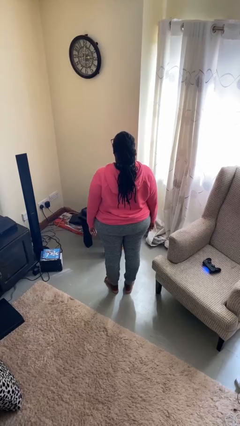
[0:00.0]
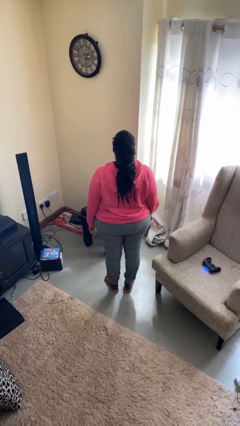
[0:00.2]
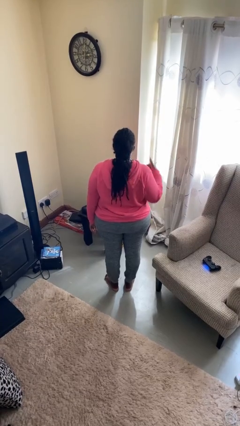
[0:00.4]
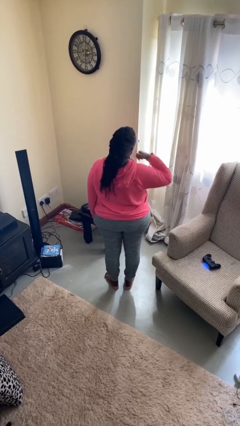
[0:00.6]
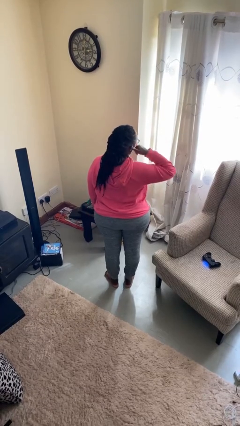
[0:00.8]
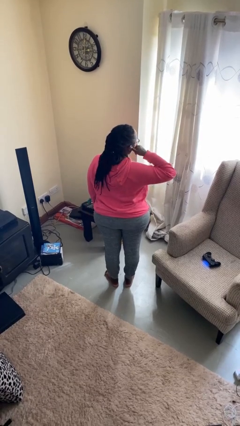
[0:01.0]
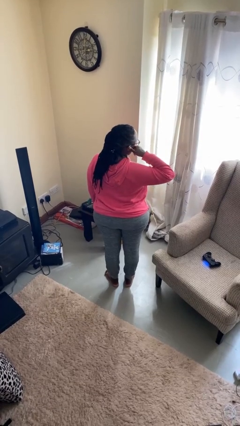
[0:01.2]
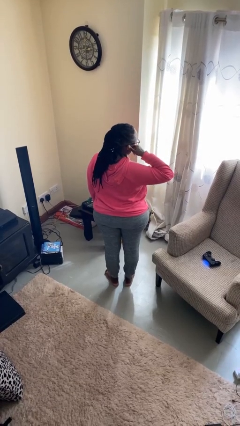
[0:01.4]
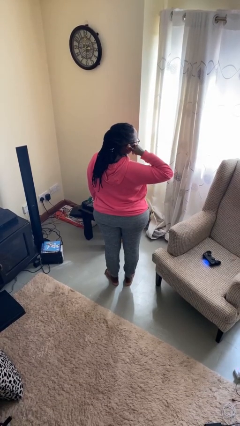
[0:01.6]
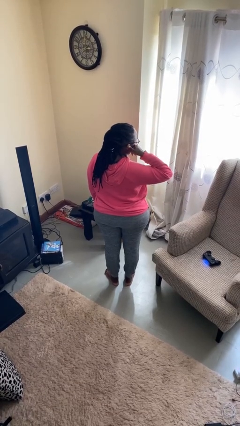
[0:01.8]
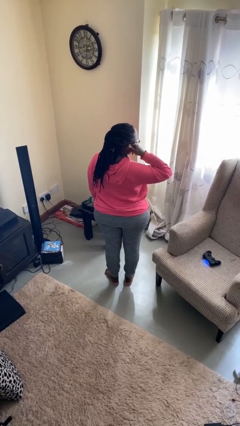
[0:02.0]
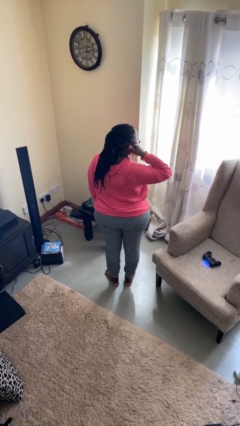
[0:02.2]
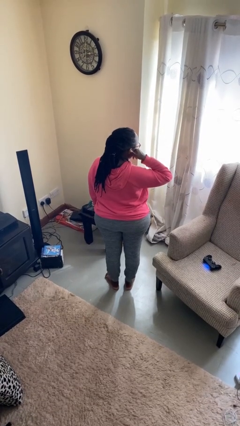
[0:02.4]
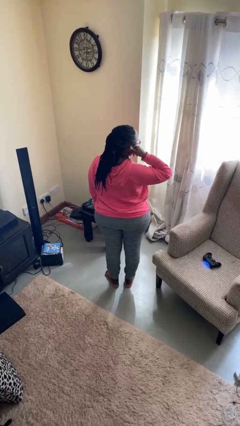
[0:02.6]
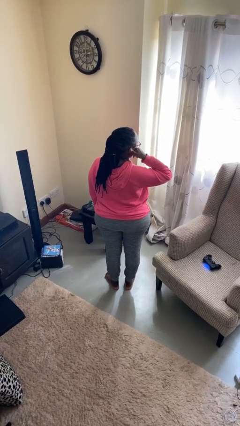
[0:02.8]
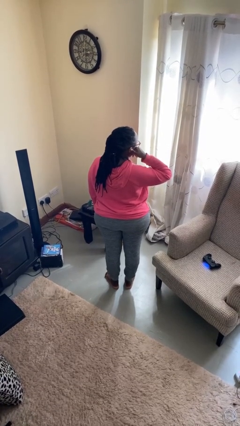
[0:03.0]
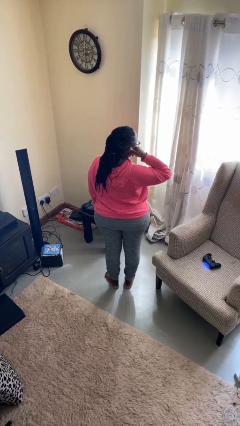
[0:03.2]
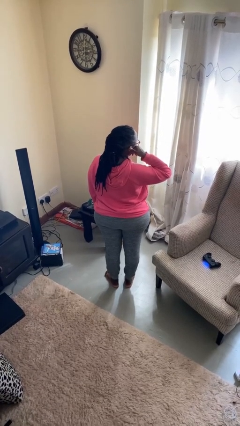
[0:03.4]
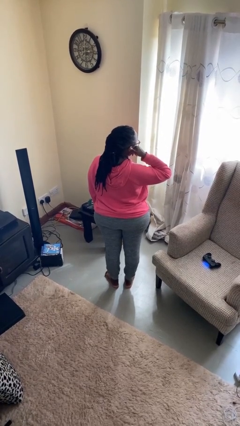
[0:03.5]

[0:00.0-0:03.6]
person gestures call me

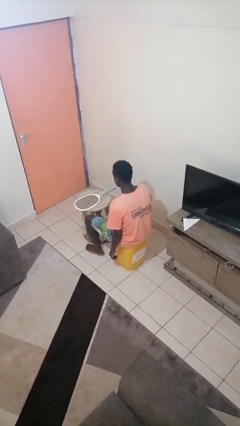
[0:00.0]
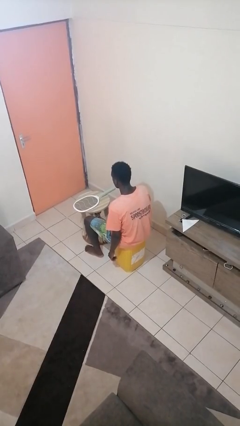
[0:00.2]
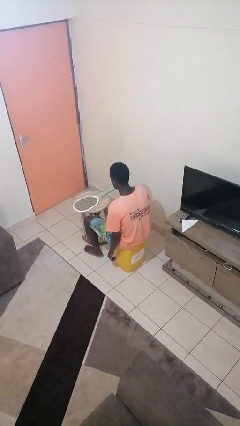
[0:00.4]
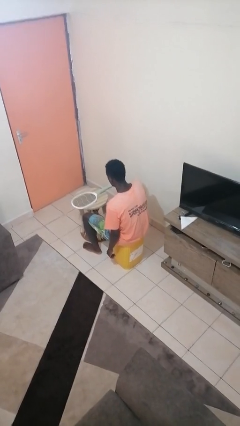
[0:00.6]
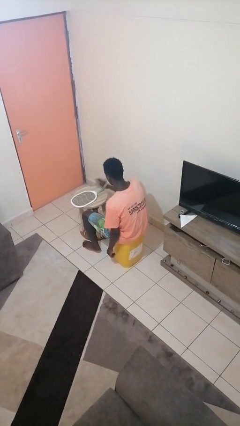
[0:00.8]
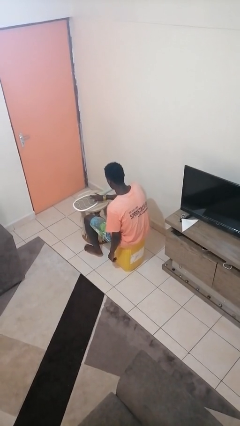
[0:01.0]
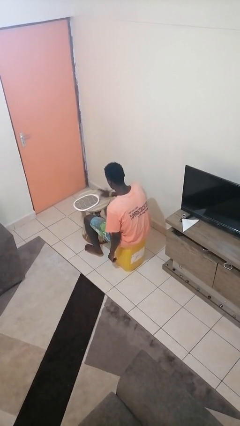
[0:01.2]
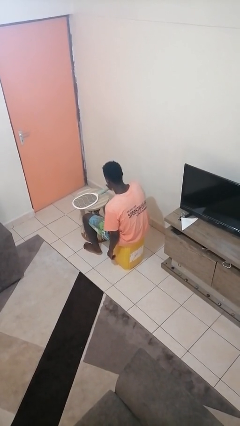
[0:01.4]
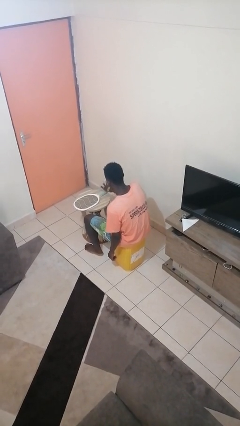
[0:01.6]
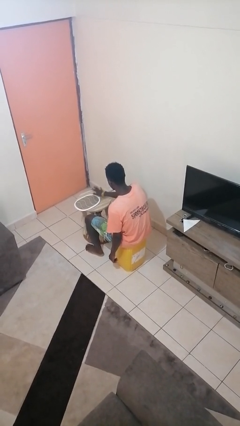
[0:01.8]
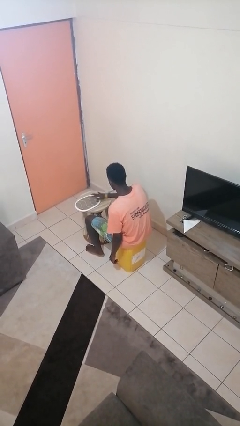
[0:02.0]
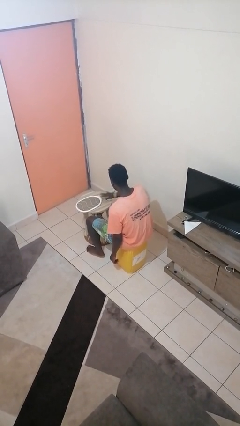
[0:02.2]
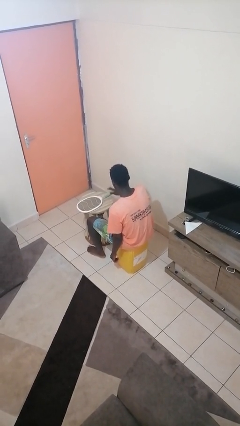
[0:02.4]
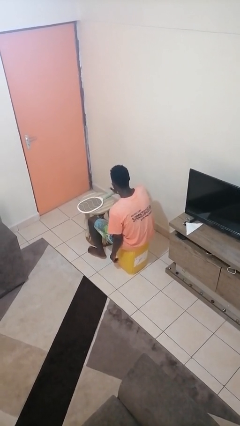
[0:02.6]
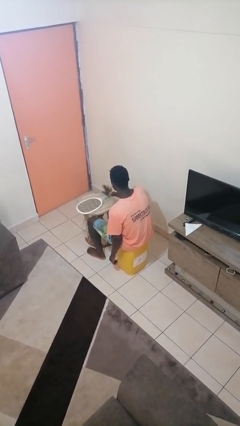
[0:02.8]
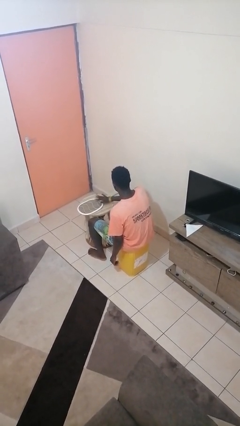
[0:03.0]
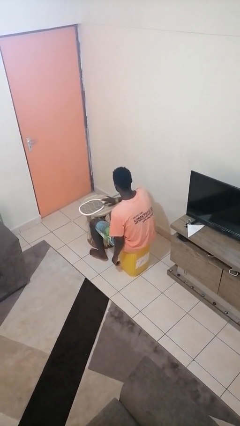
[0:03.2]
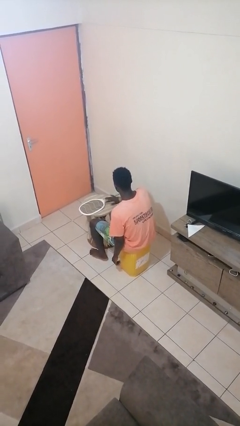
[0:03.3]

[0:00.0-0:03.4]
person waves hand over object

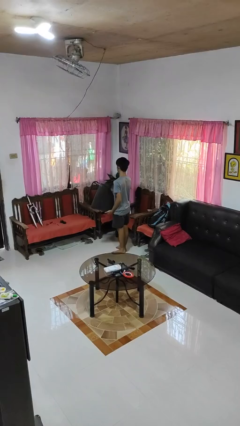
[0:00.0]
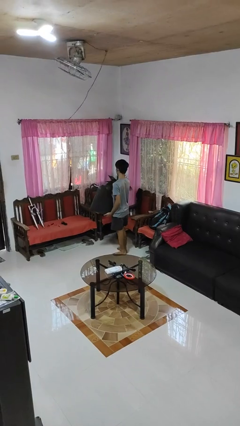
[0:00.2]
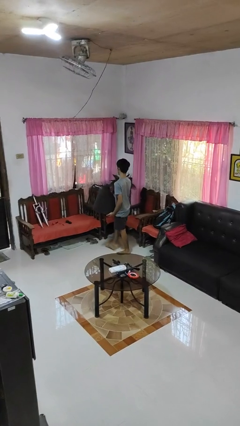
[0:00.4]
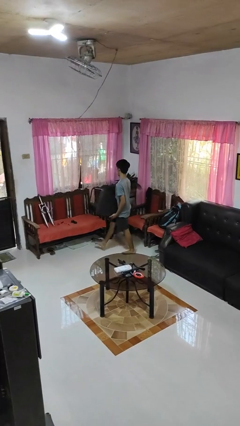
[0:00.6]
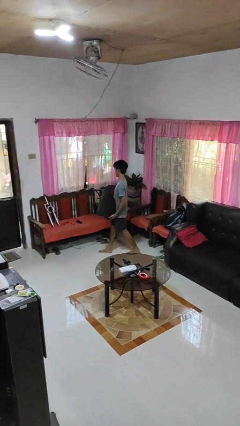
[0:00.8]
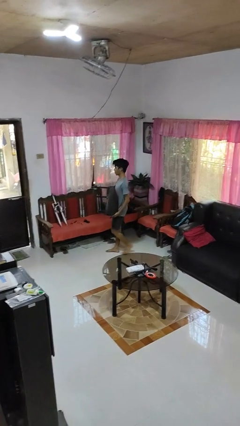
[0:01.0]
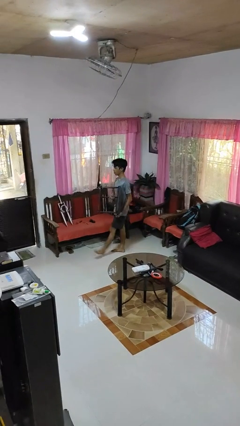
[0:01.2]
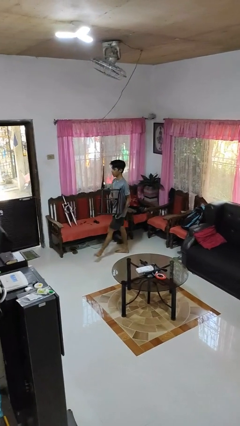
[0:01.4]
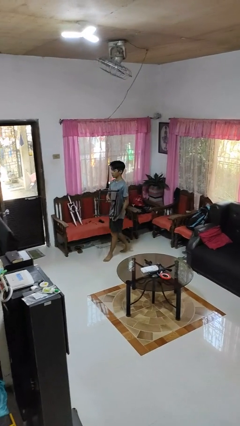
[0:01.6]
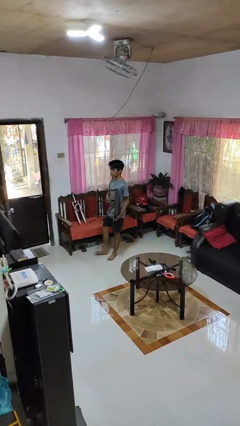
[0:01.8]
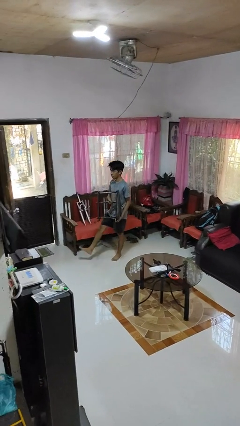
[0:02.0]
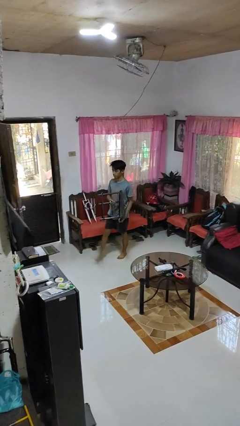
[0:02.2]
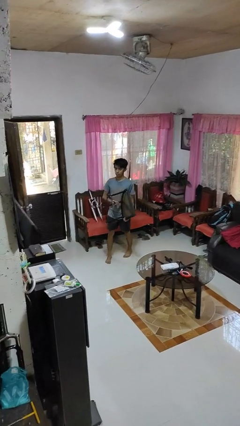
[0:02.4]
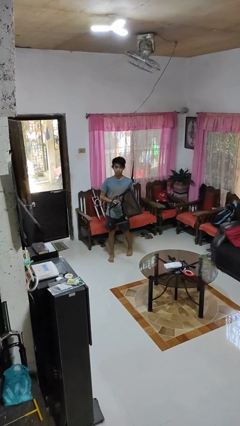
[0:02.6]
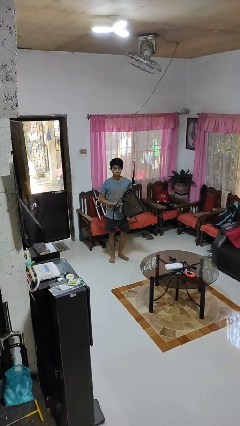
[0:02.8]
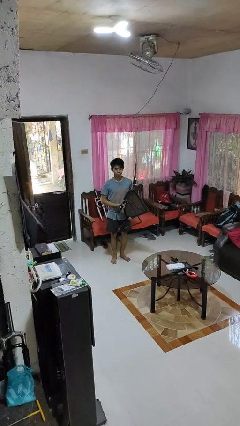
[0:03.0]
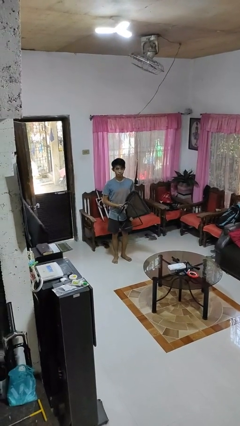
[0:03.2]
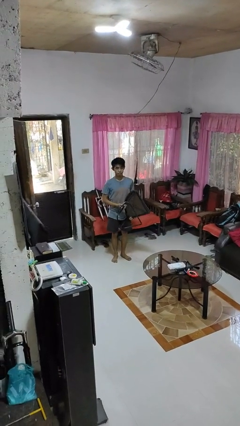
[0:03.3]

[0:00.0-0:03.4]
person carries furniture

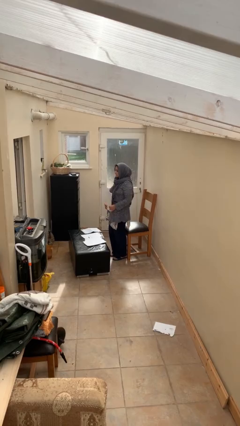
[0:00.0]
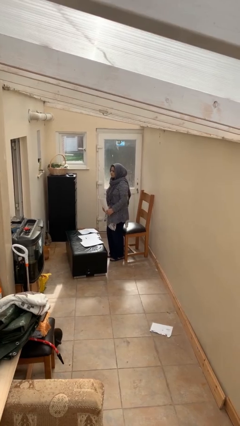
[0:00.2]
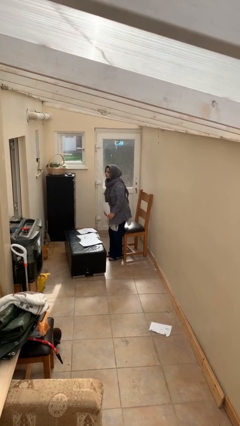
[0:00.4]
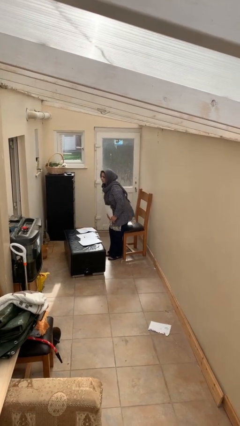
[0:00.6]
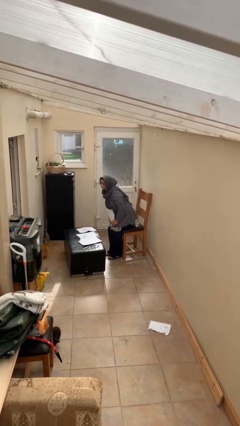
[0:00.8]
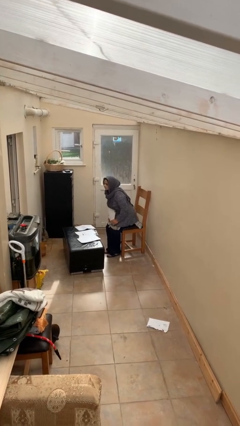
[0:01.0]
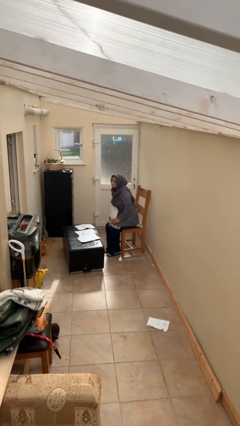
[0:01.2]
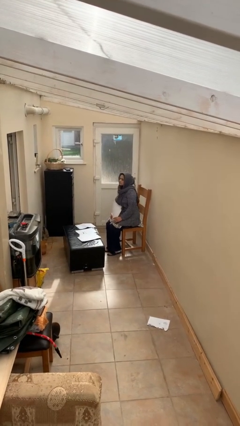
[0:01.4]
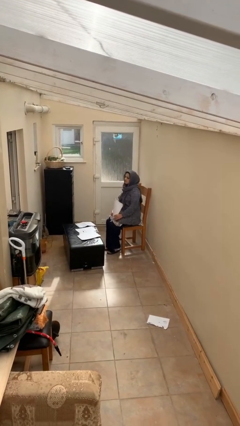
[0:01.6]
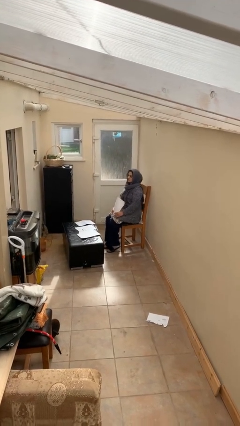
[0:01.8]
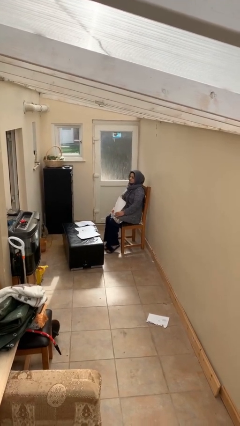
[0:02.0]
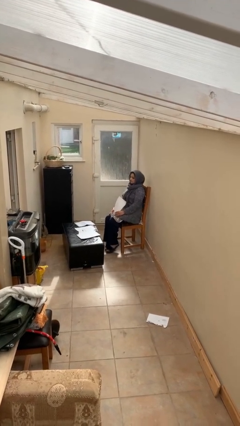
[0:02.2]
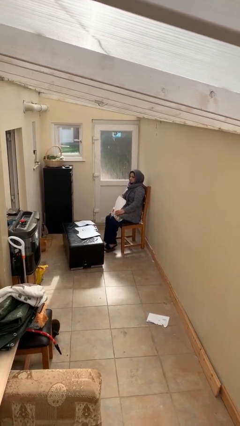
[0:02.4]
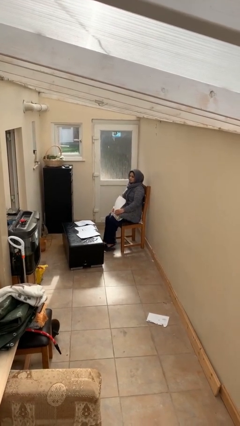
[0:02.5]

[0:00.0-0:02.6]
person sits down

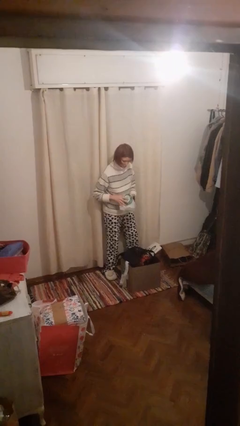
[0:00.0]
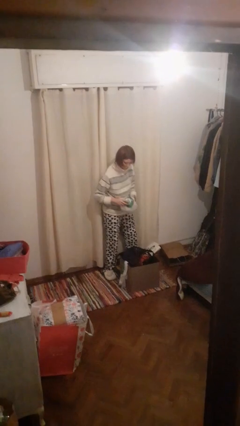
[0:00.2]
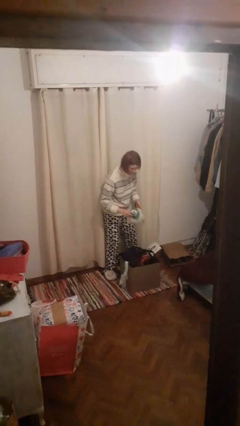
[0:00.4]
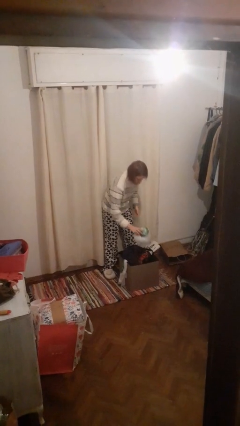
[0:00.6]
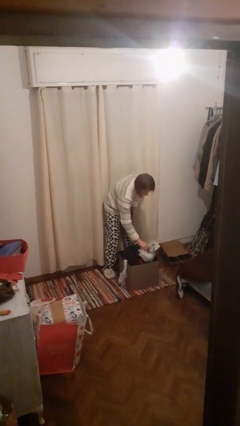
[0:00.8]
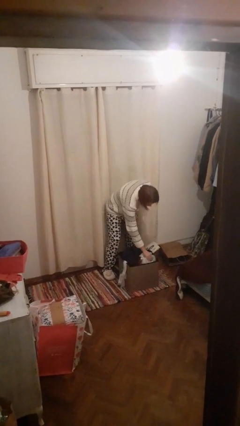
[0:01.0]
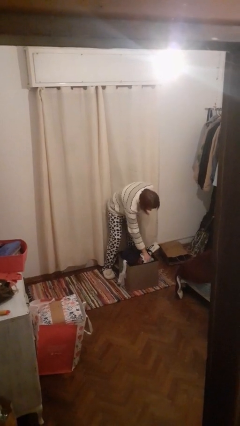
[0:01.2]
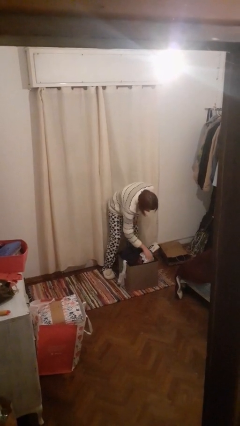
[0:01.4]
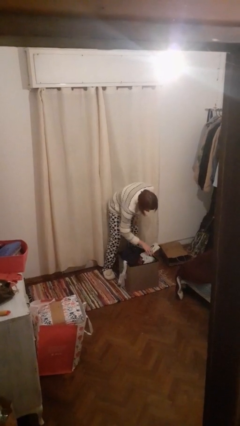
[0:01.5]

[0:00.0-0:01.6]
person puts object into basket

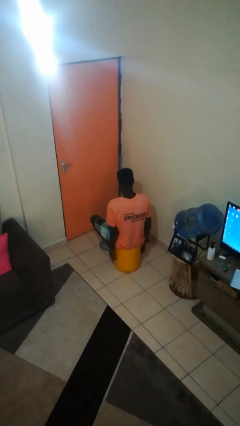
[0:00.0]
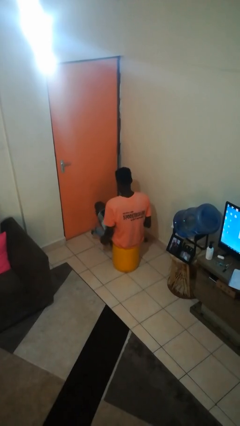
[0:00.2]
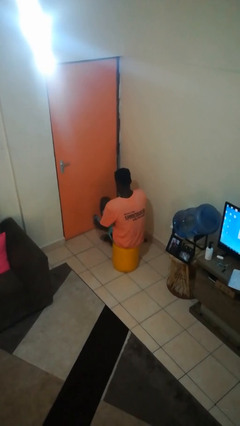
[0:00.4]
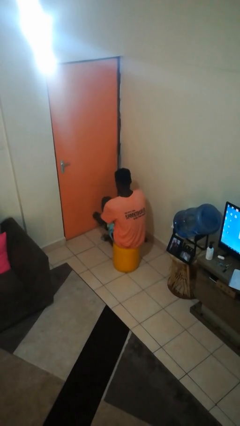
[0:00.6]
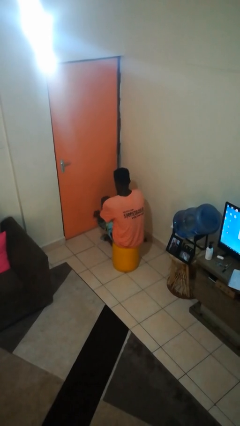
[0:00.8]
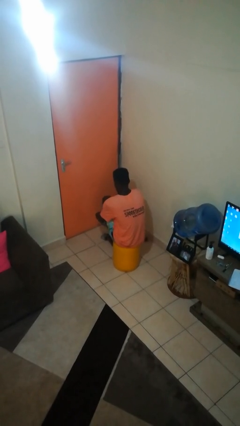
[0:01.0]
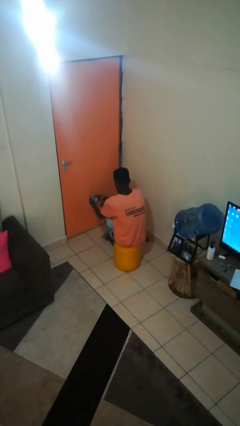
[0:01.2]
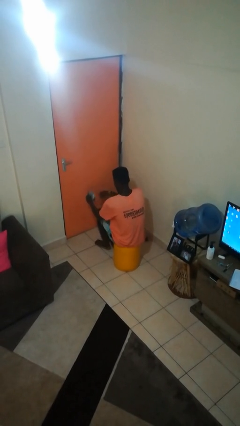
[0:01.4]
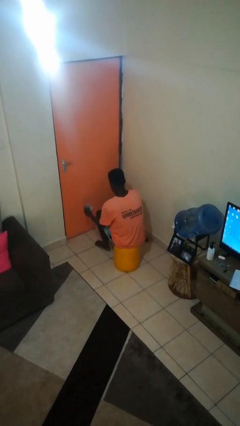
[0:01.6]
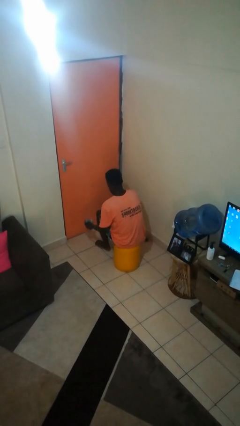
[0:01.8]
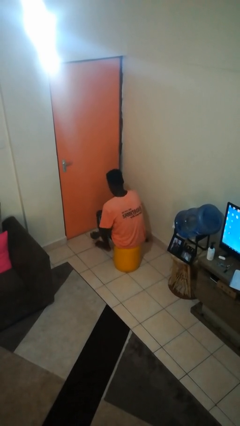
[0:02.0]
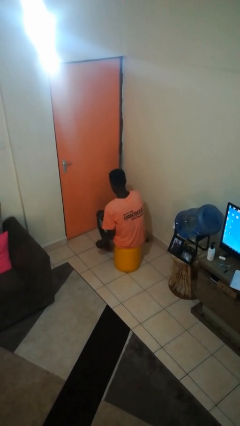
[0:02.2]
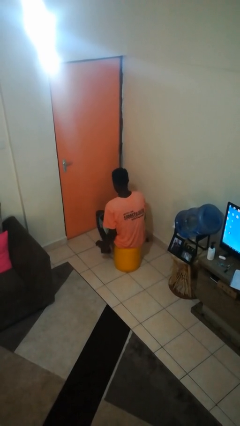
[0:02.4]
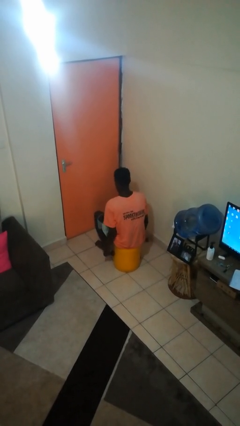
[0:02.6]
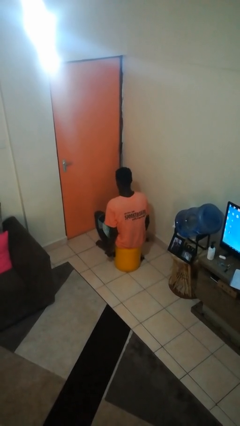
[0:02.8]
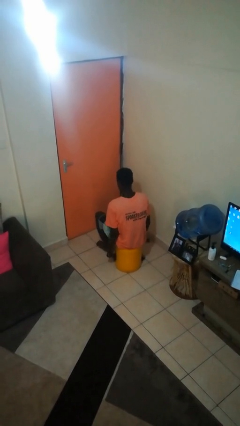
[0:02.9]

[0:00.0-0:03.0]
person takes off socks
